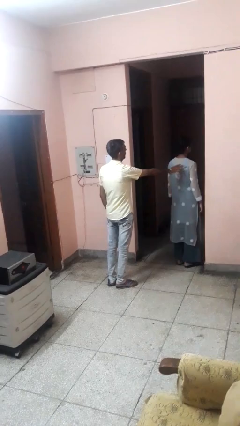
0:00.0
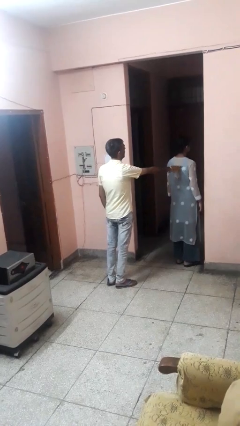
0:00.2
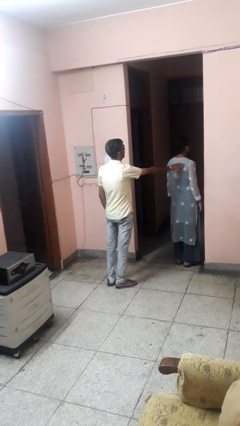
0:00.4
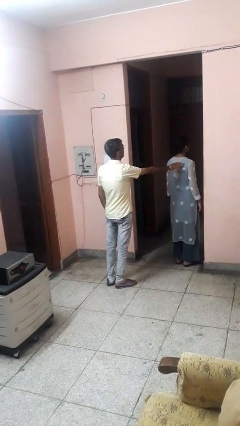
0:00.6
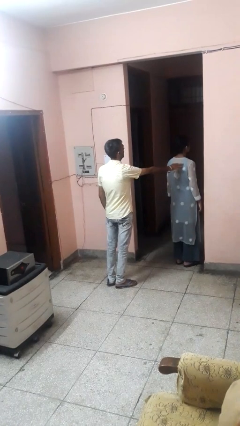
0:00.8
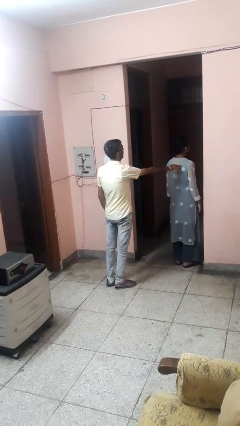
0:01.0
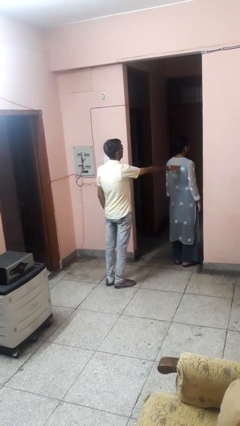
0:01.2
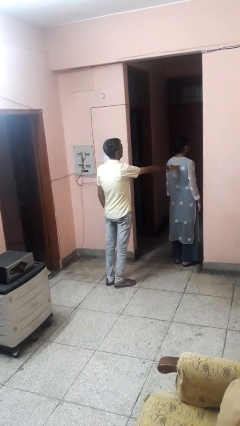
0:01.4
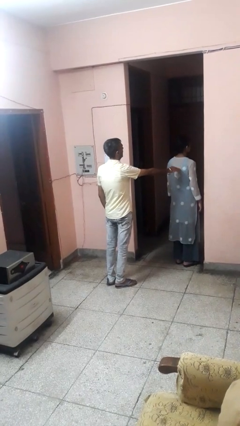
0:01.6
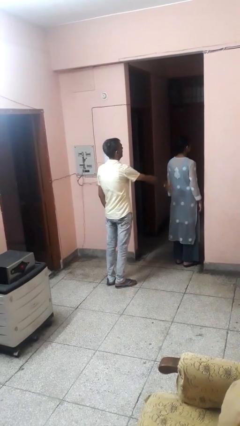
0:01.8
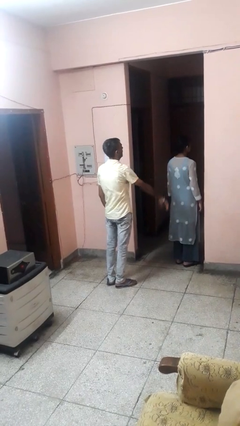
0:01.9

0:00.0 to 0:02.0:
person touches back of person

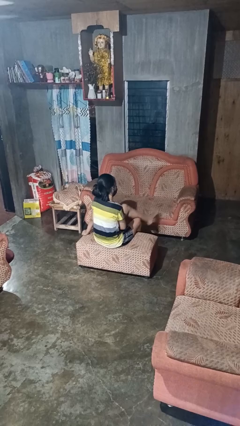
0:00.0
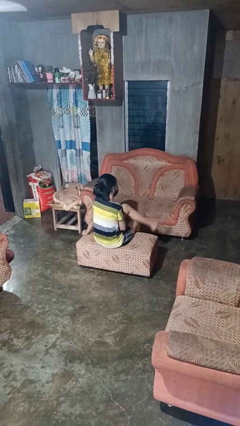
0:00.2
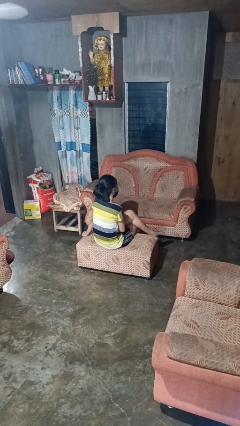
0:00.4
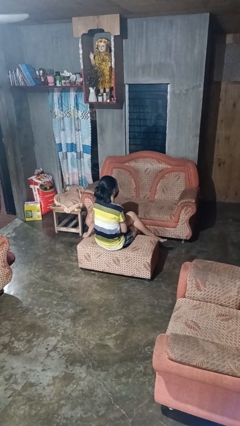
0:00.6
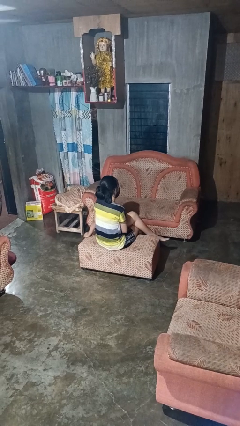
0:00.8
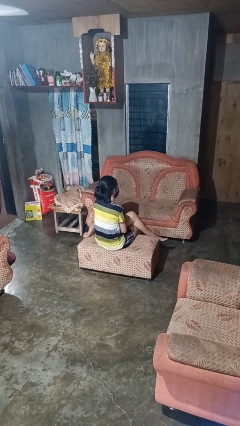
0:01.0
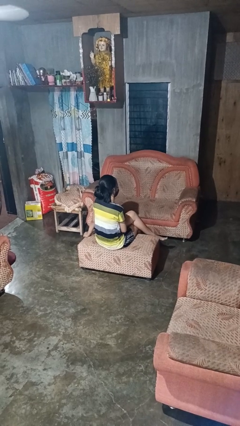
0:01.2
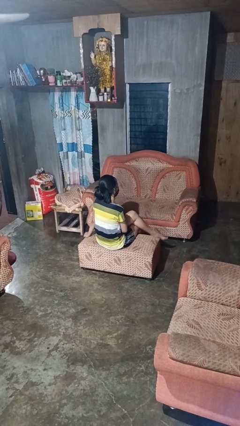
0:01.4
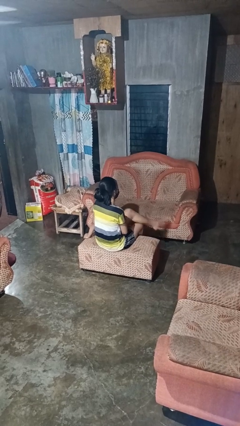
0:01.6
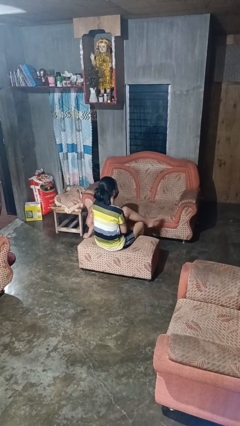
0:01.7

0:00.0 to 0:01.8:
person crosses legs

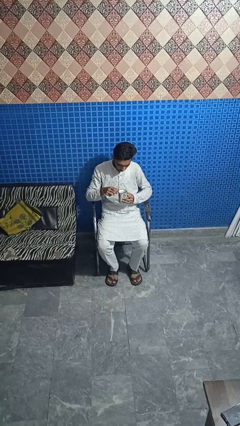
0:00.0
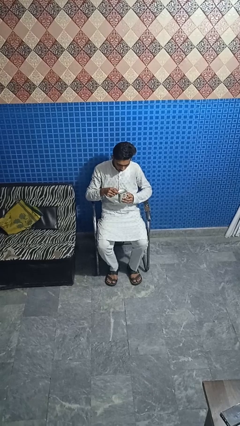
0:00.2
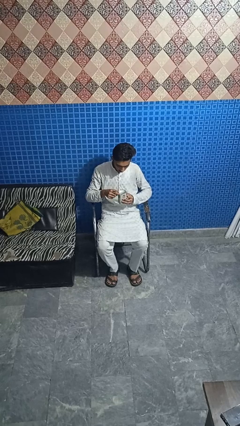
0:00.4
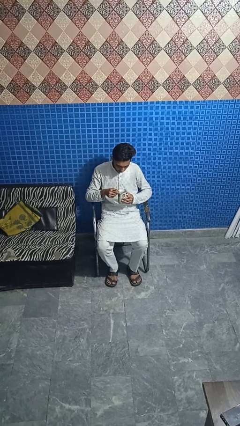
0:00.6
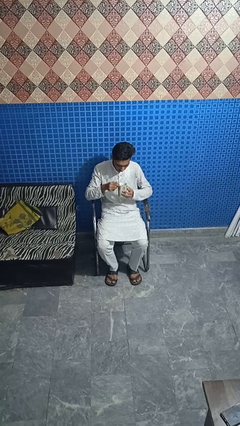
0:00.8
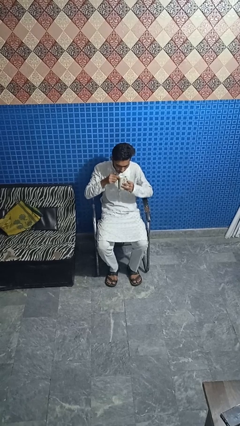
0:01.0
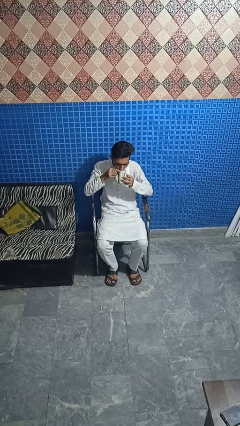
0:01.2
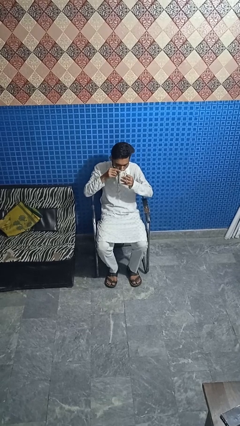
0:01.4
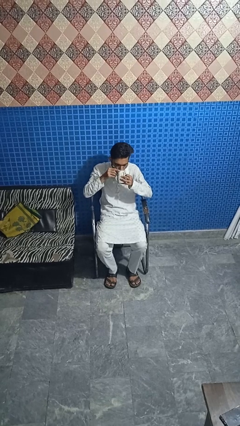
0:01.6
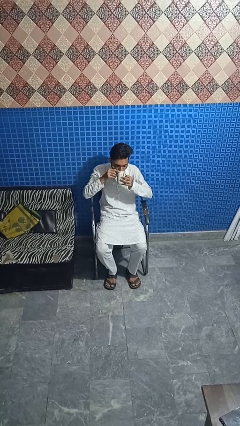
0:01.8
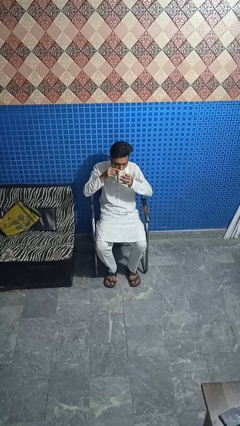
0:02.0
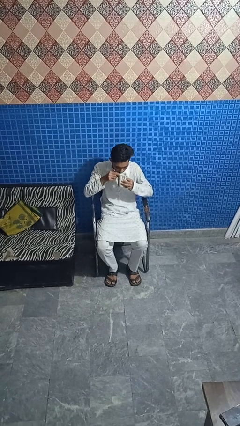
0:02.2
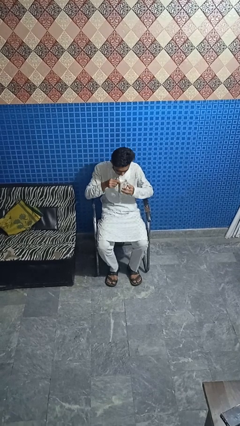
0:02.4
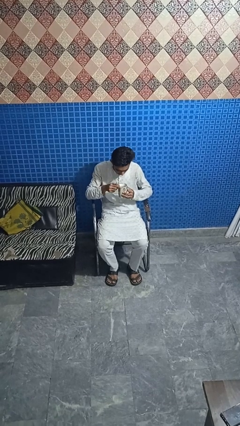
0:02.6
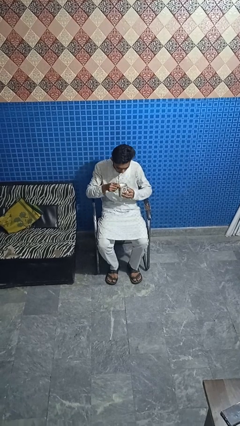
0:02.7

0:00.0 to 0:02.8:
person drinks from mug

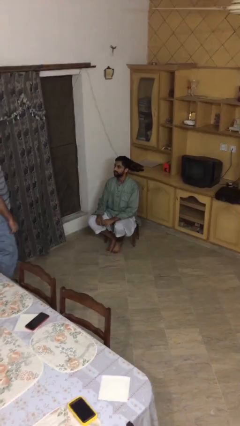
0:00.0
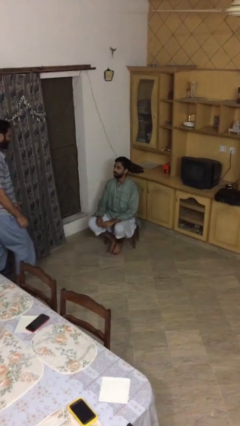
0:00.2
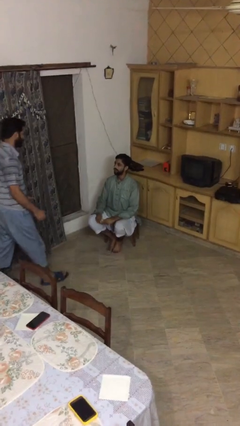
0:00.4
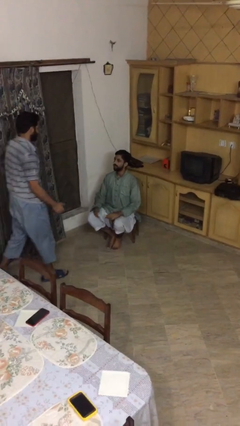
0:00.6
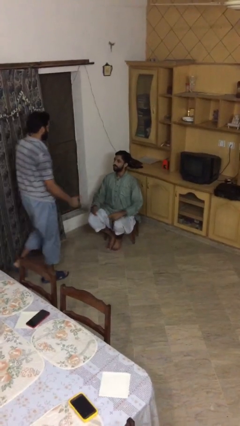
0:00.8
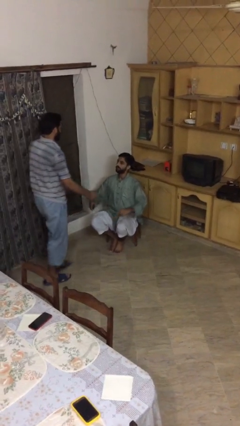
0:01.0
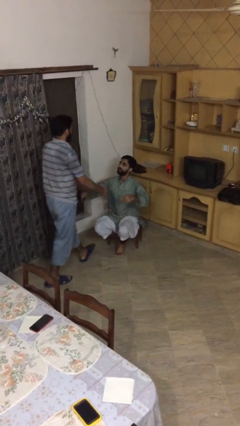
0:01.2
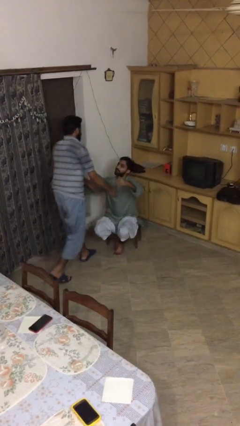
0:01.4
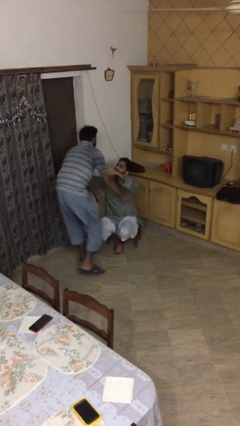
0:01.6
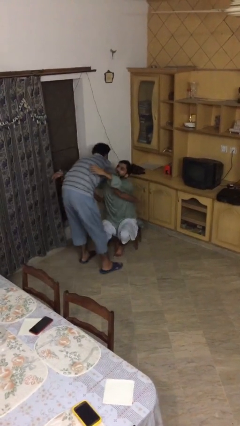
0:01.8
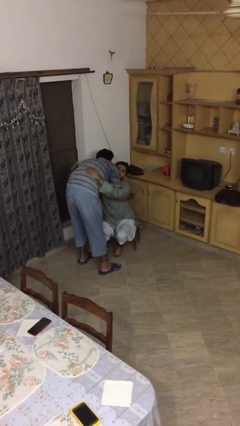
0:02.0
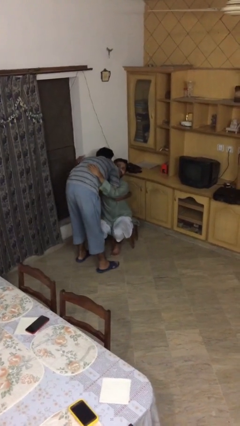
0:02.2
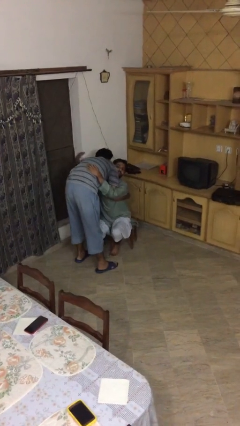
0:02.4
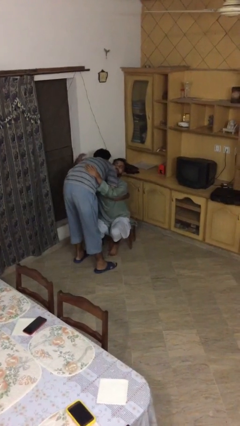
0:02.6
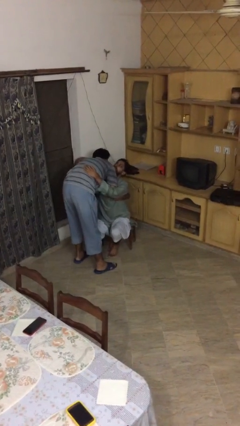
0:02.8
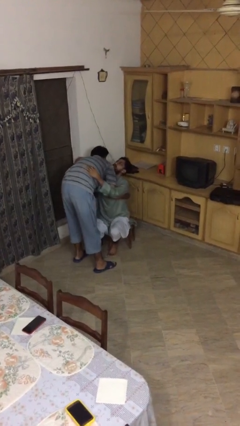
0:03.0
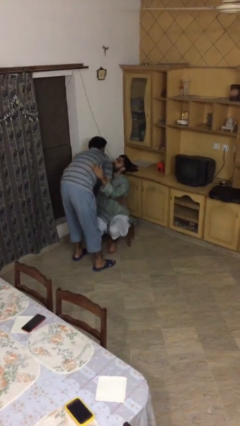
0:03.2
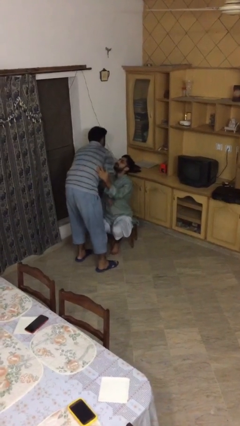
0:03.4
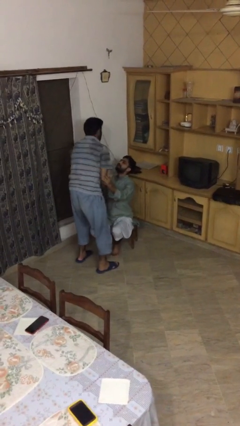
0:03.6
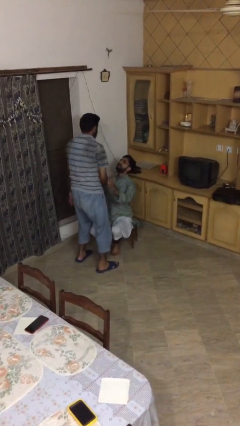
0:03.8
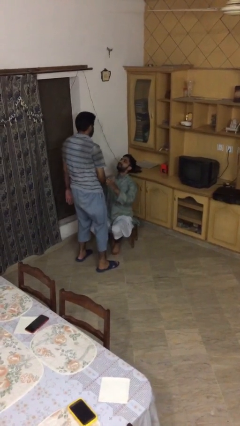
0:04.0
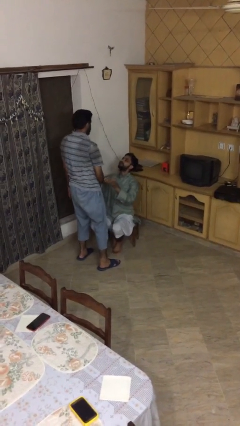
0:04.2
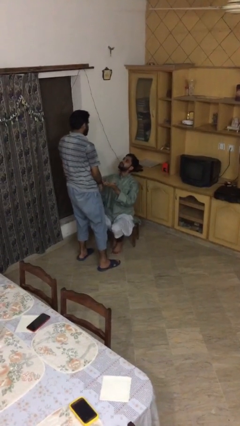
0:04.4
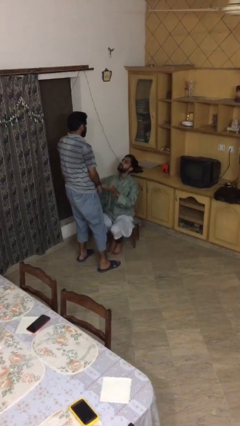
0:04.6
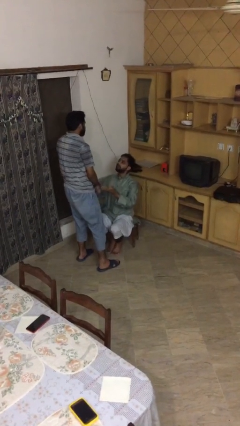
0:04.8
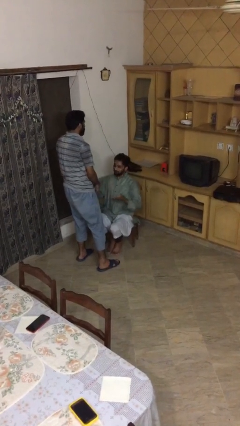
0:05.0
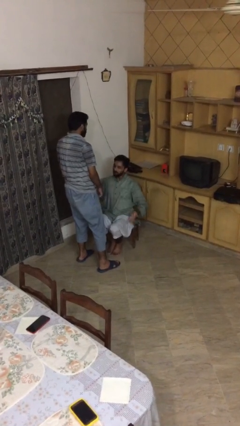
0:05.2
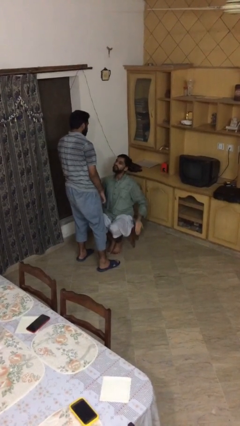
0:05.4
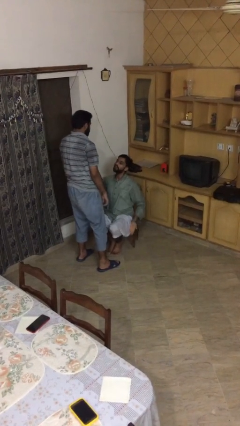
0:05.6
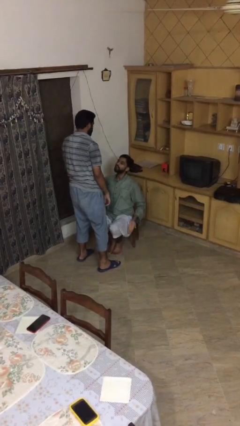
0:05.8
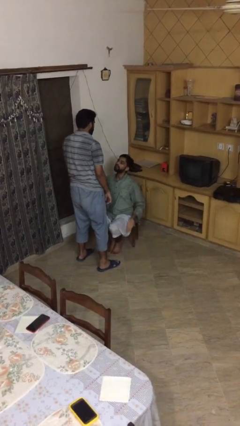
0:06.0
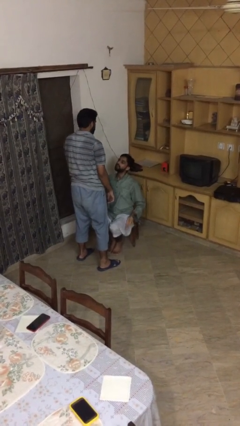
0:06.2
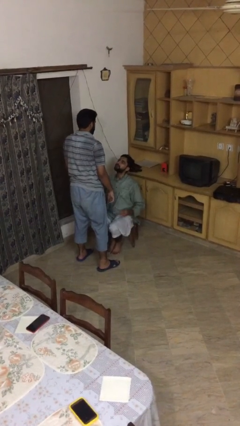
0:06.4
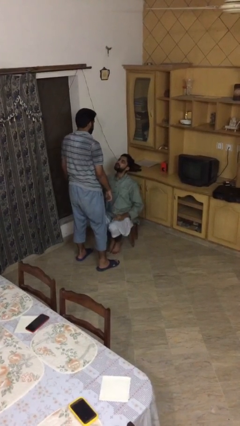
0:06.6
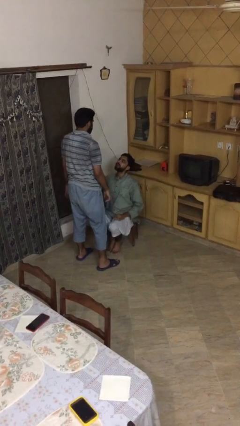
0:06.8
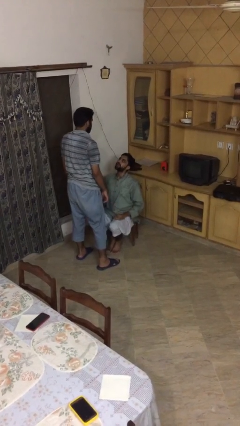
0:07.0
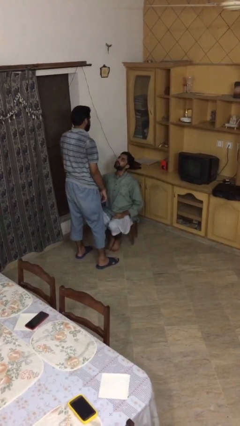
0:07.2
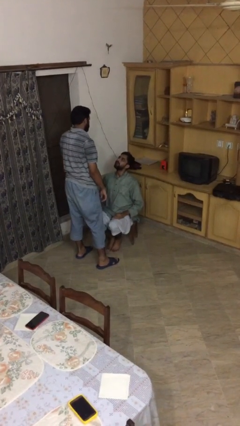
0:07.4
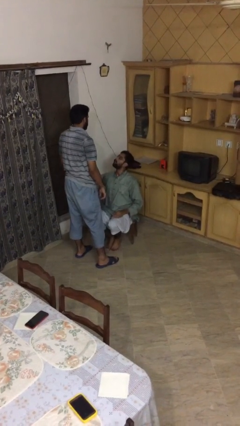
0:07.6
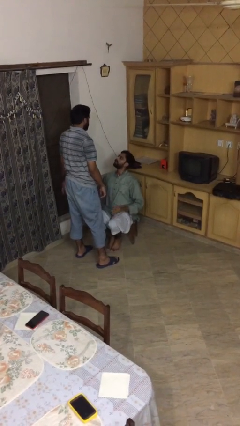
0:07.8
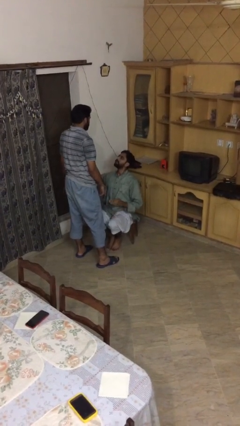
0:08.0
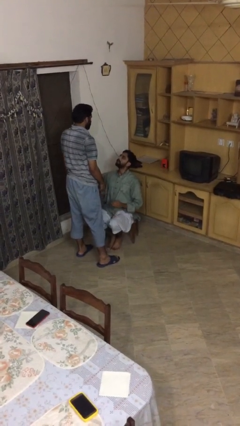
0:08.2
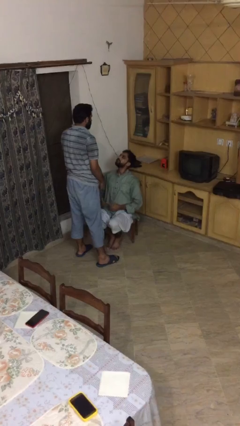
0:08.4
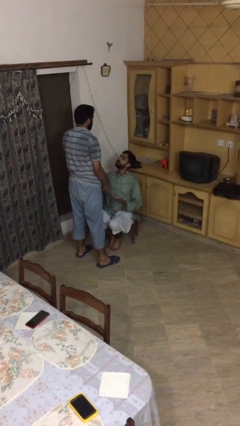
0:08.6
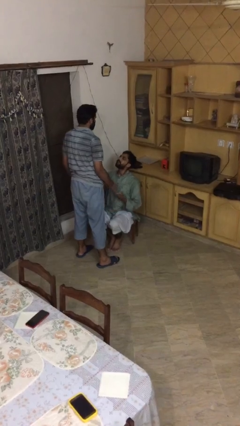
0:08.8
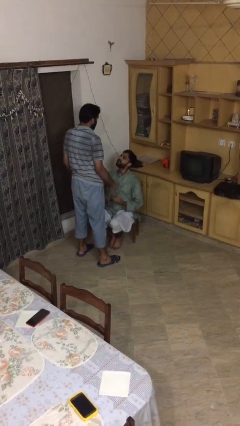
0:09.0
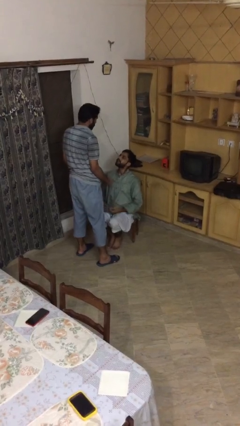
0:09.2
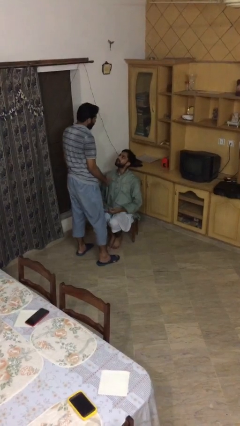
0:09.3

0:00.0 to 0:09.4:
person embraces person

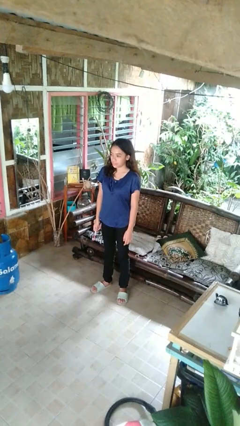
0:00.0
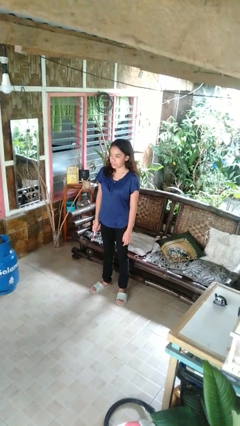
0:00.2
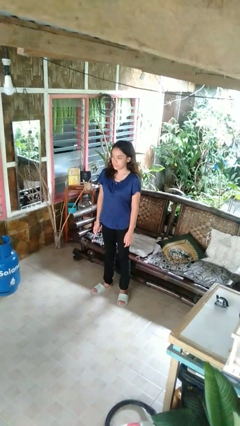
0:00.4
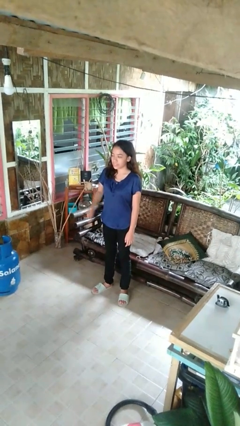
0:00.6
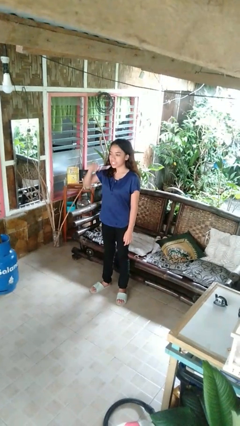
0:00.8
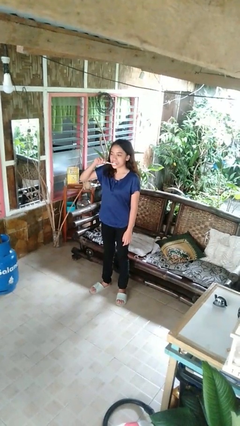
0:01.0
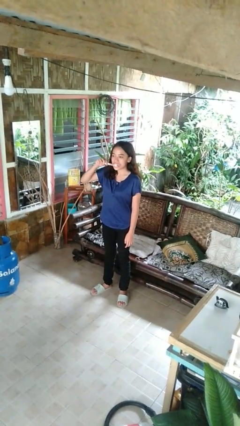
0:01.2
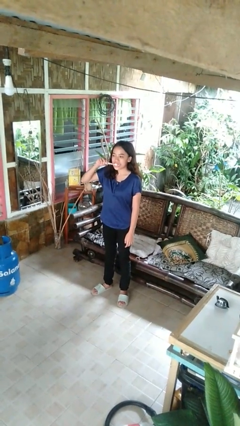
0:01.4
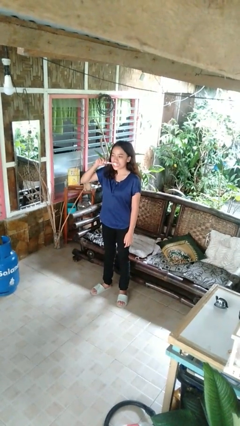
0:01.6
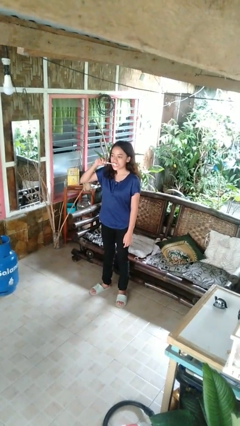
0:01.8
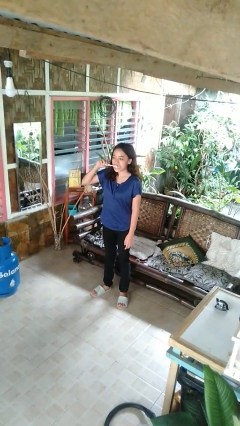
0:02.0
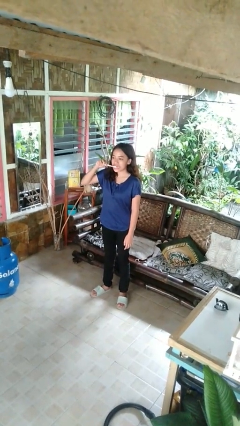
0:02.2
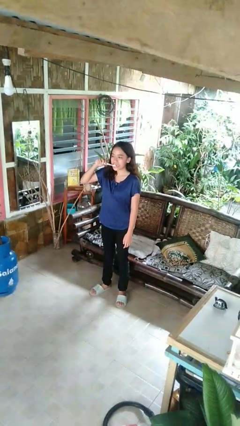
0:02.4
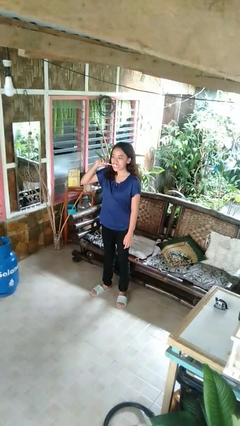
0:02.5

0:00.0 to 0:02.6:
person brushes teeth
